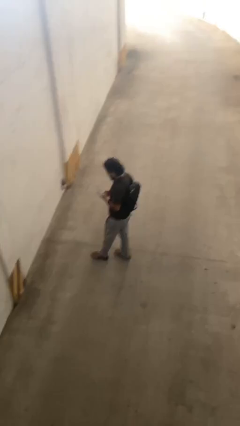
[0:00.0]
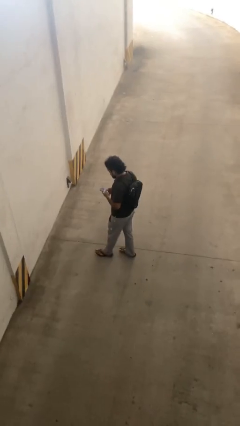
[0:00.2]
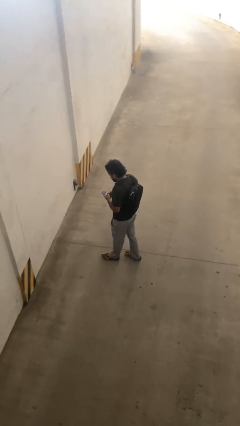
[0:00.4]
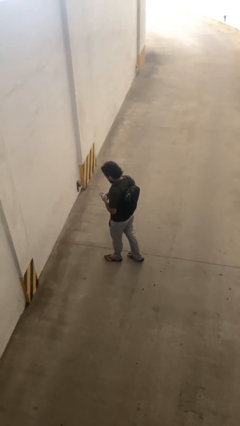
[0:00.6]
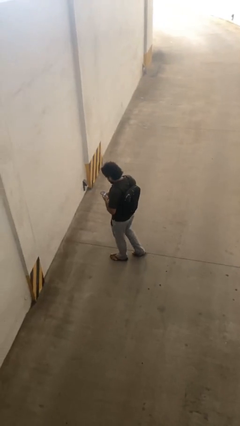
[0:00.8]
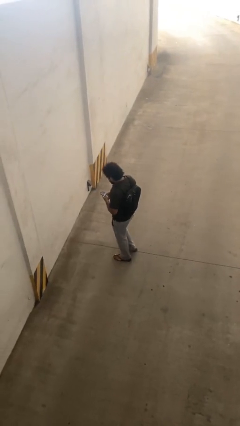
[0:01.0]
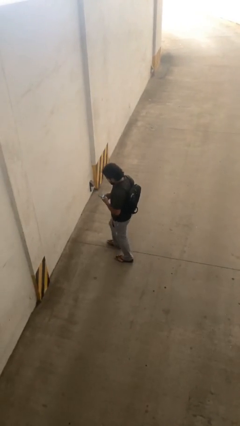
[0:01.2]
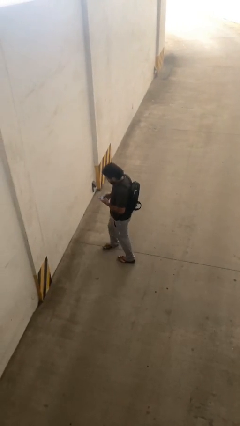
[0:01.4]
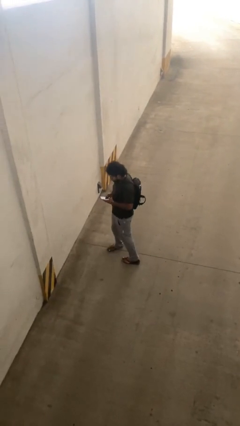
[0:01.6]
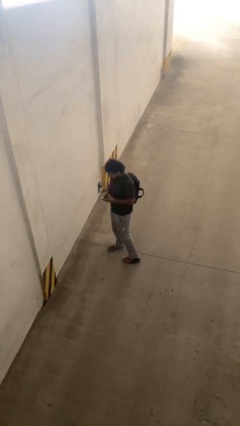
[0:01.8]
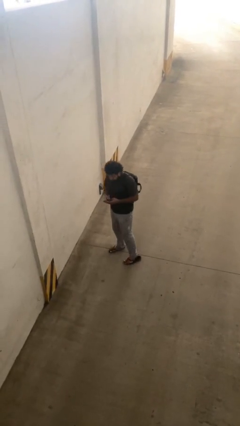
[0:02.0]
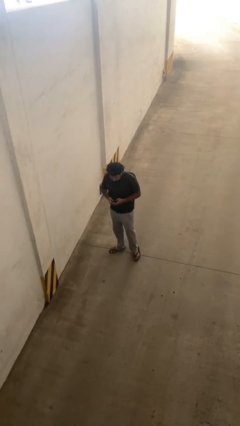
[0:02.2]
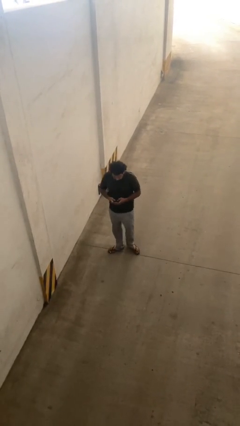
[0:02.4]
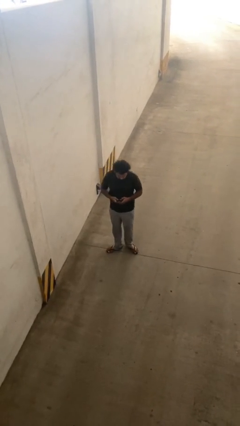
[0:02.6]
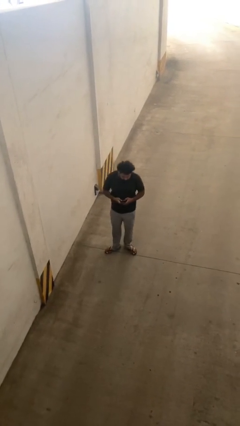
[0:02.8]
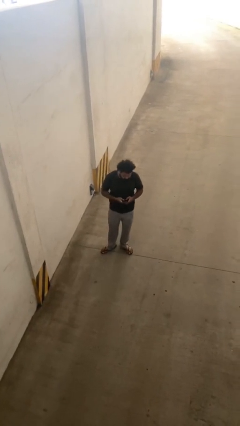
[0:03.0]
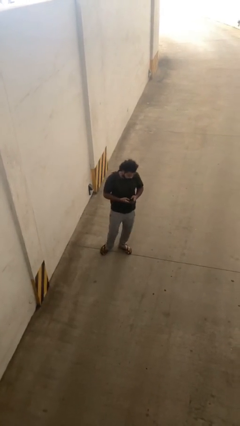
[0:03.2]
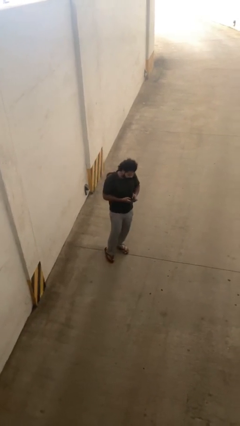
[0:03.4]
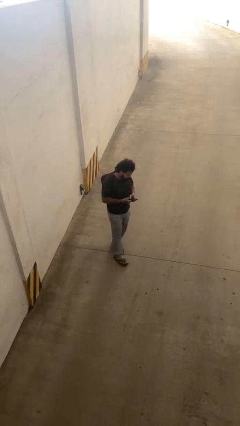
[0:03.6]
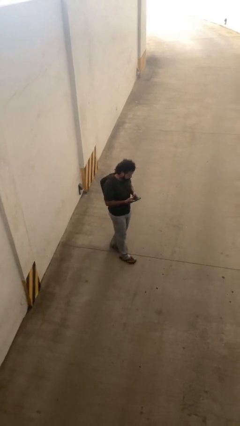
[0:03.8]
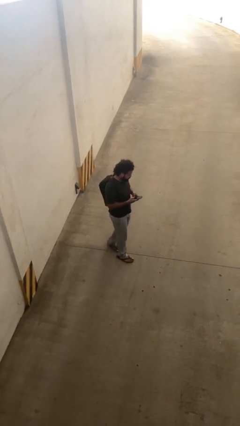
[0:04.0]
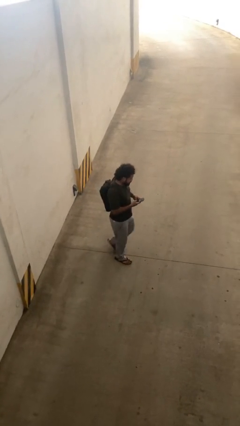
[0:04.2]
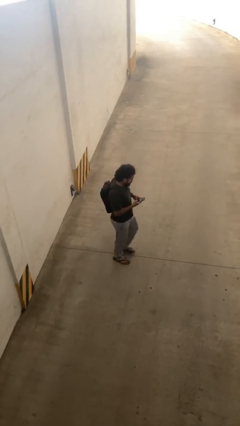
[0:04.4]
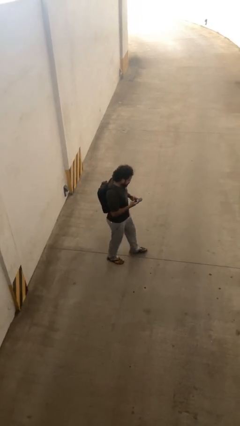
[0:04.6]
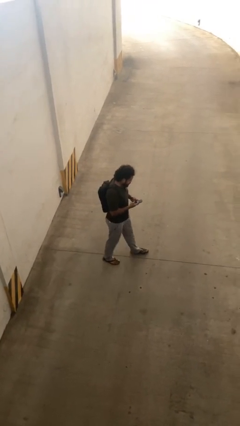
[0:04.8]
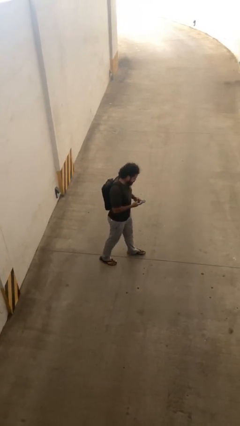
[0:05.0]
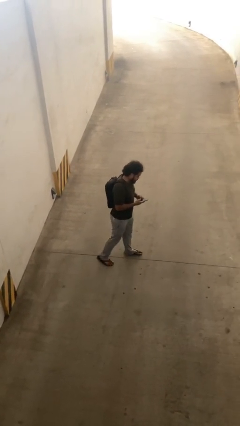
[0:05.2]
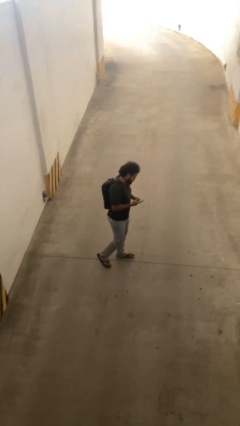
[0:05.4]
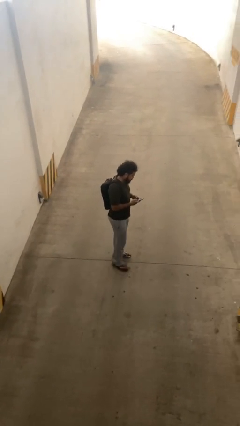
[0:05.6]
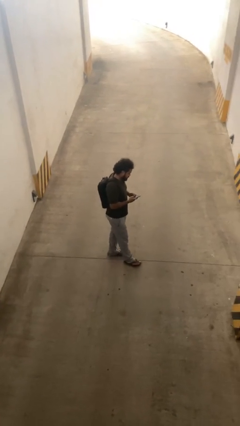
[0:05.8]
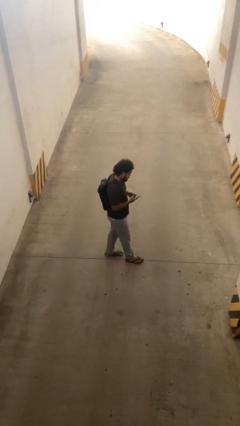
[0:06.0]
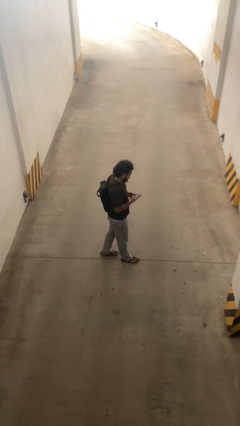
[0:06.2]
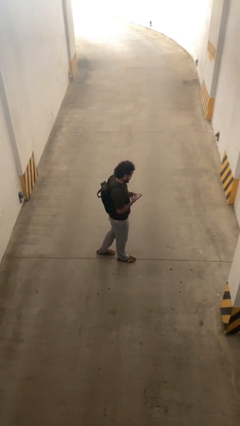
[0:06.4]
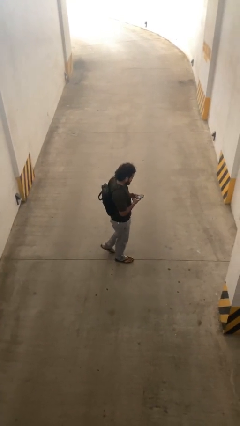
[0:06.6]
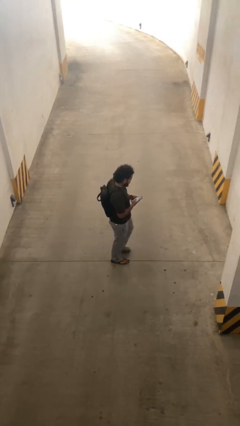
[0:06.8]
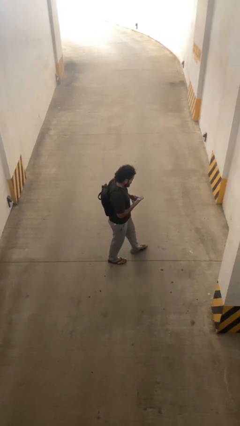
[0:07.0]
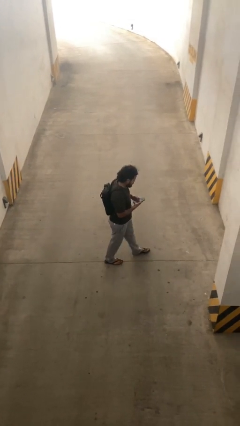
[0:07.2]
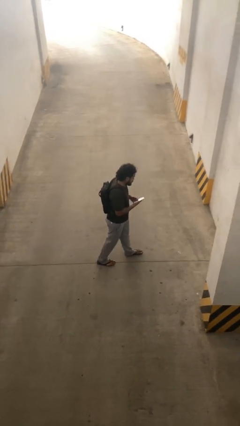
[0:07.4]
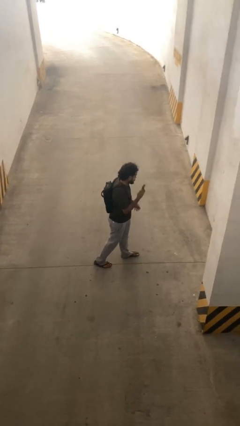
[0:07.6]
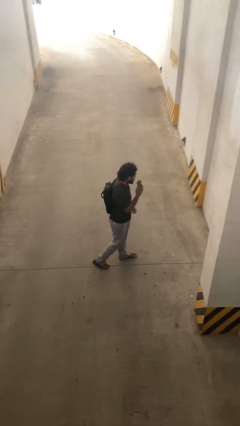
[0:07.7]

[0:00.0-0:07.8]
person texts on phone

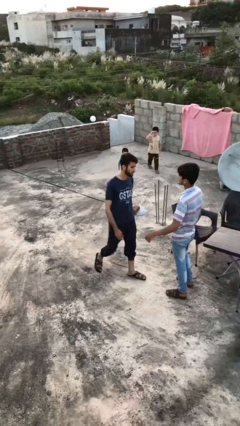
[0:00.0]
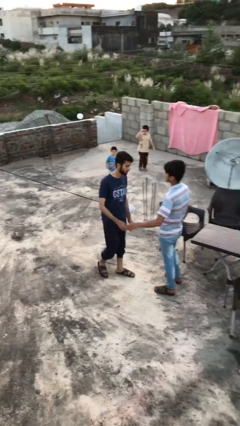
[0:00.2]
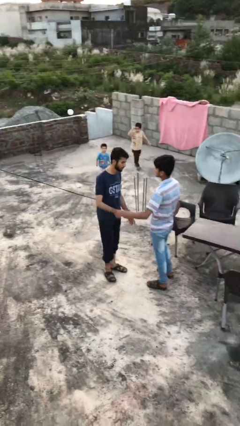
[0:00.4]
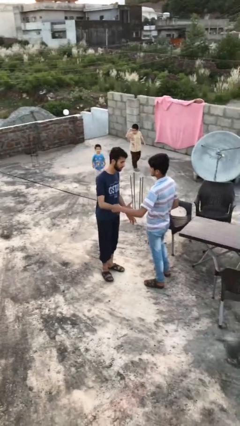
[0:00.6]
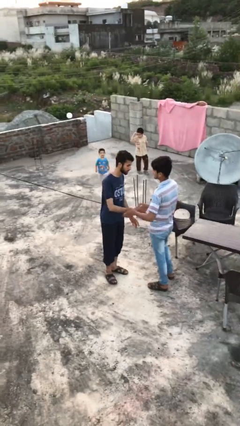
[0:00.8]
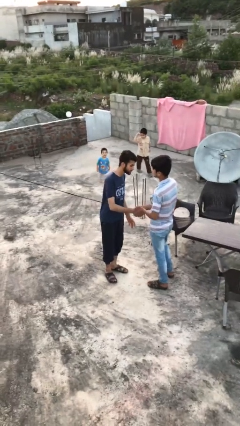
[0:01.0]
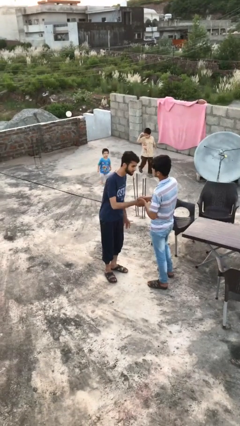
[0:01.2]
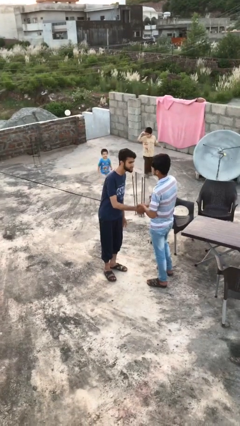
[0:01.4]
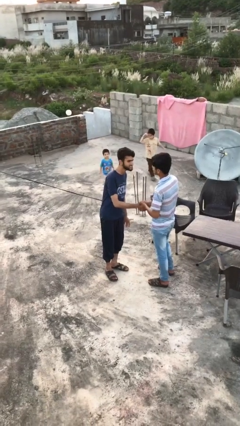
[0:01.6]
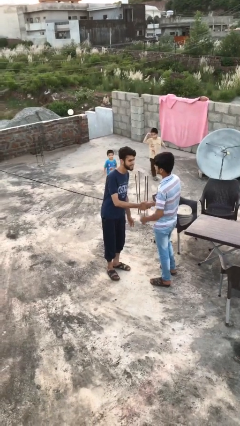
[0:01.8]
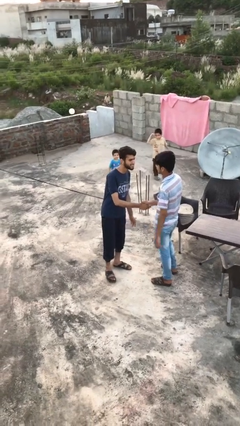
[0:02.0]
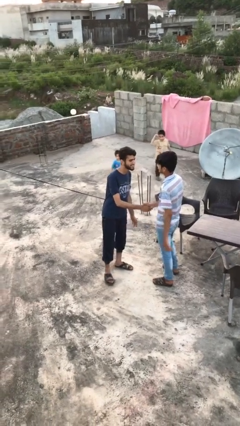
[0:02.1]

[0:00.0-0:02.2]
person shakes hand

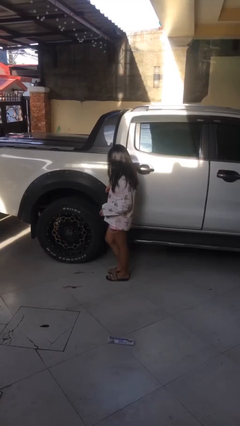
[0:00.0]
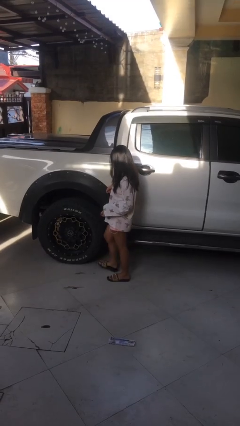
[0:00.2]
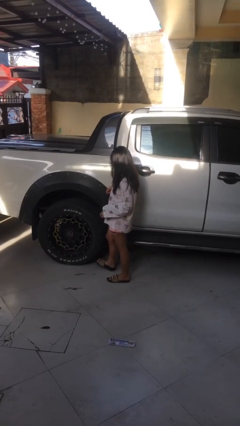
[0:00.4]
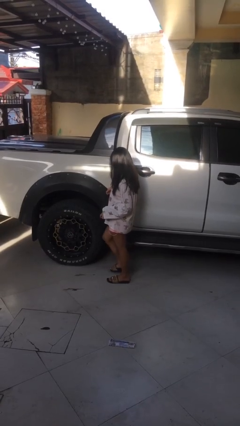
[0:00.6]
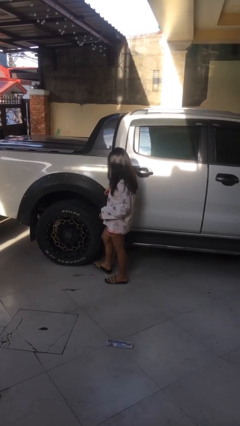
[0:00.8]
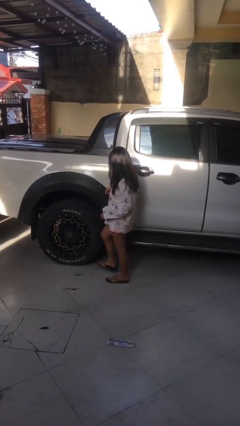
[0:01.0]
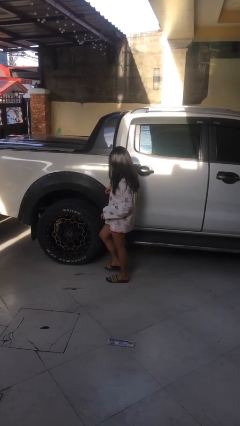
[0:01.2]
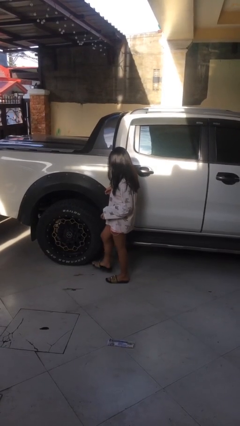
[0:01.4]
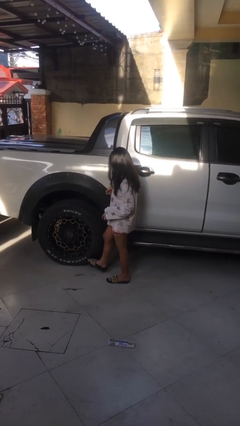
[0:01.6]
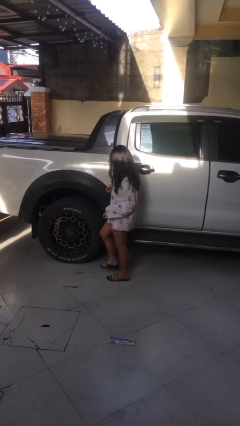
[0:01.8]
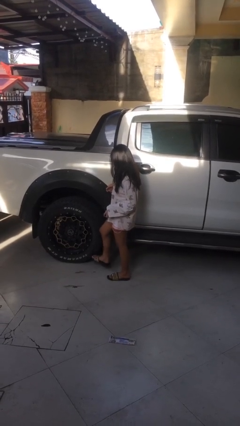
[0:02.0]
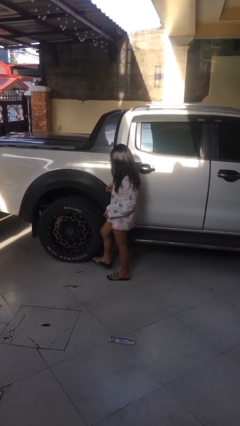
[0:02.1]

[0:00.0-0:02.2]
person kicks car tires

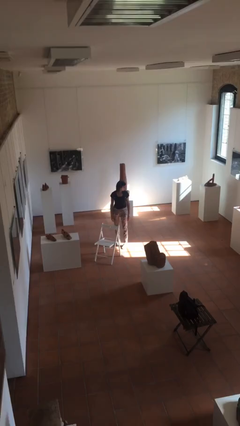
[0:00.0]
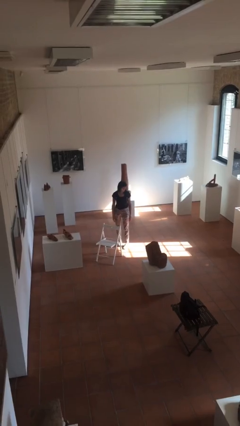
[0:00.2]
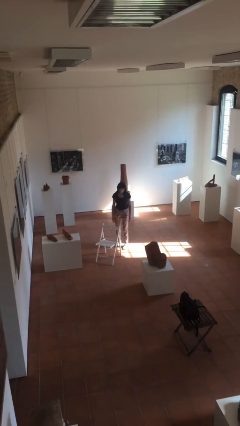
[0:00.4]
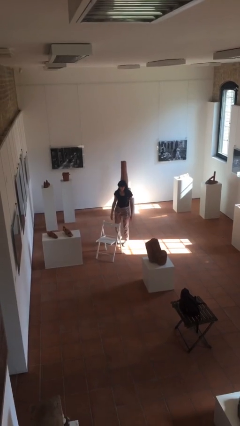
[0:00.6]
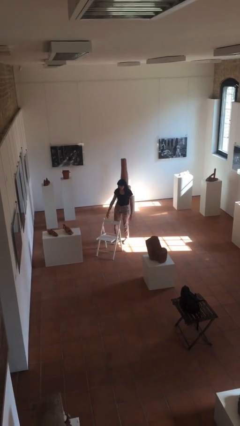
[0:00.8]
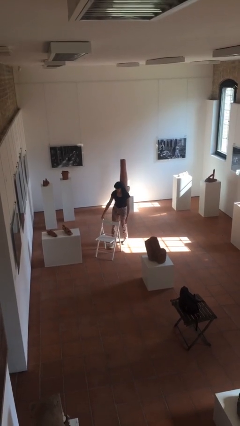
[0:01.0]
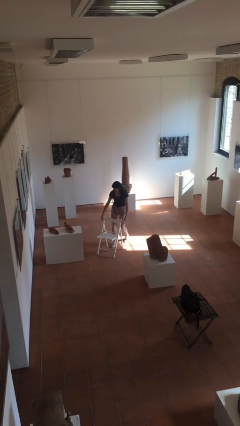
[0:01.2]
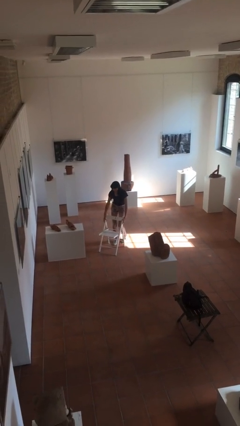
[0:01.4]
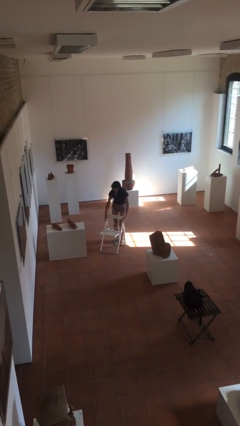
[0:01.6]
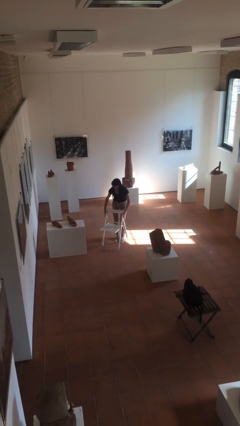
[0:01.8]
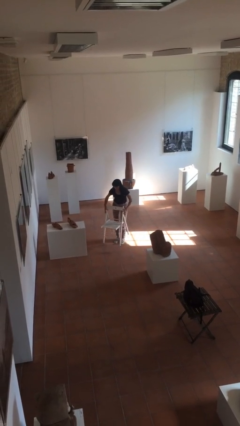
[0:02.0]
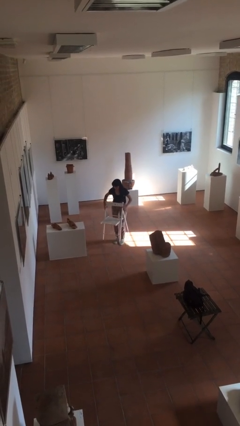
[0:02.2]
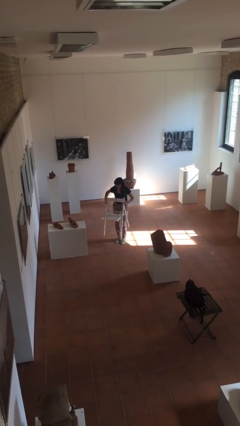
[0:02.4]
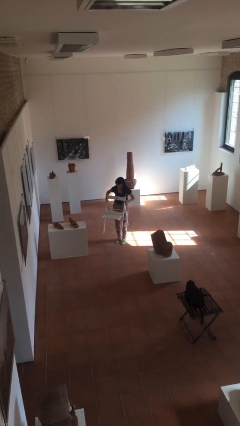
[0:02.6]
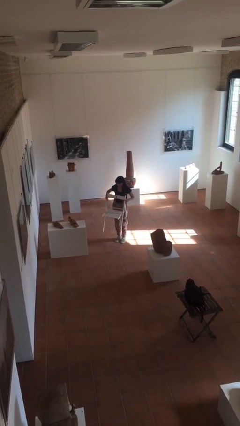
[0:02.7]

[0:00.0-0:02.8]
person picks up object from floor

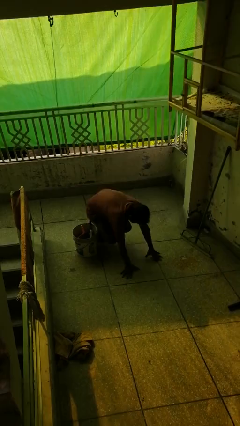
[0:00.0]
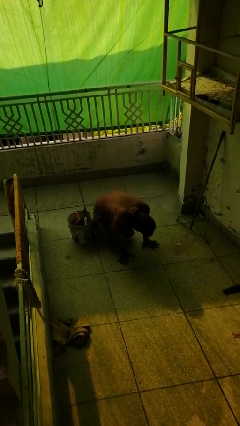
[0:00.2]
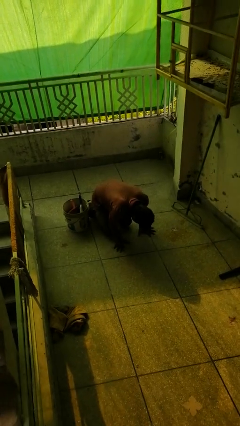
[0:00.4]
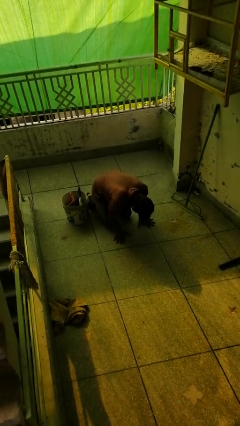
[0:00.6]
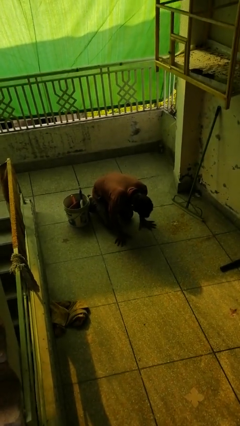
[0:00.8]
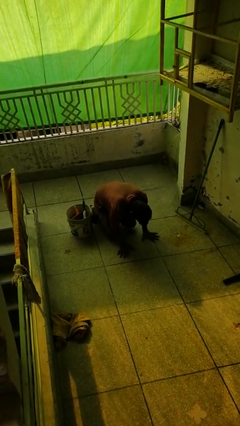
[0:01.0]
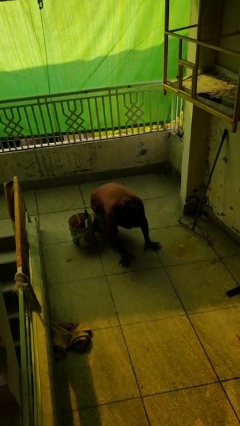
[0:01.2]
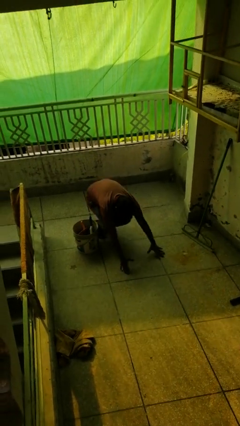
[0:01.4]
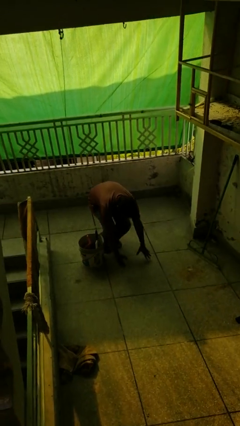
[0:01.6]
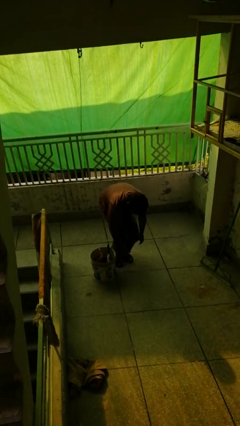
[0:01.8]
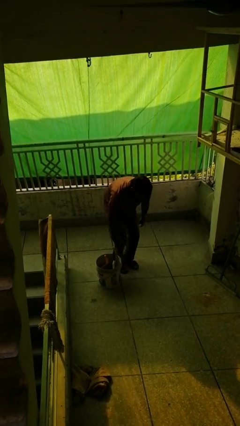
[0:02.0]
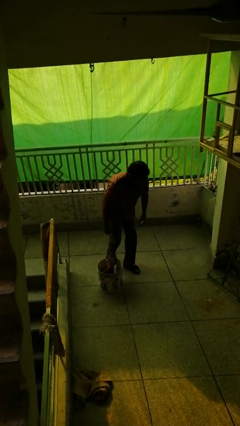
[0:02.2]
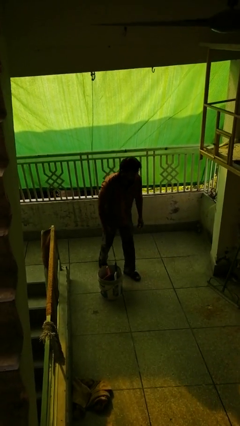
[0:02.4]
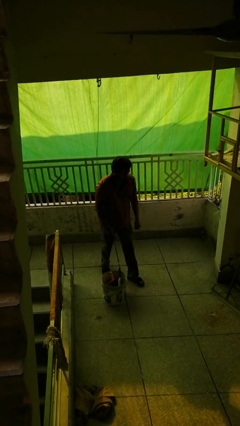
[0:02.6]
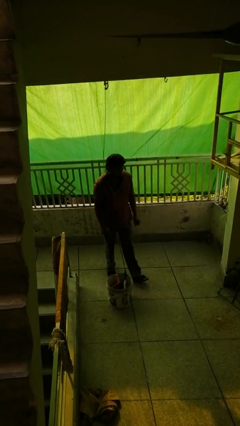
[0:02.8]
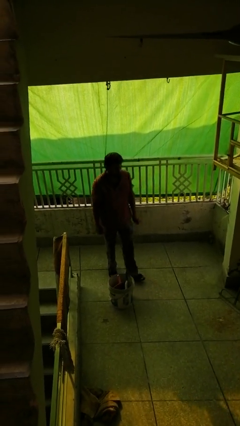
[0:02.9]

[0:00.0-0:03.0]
person stands up from floor
